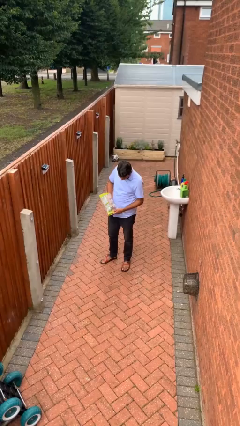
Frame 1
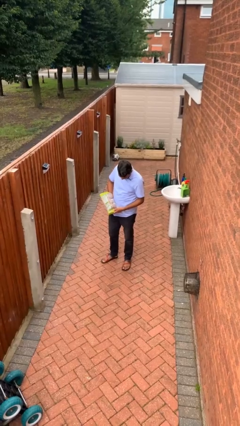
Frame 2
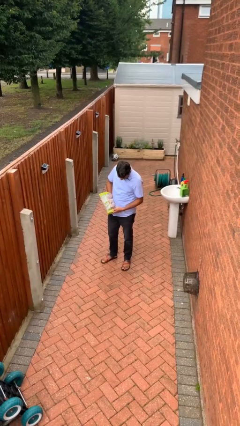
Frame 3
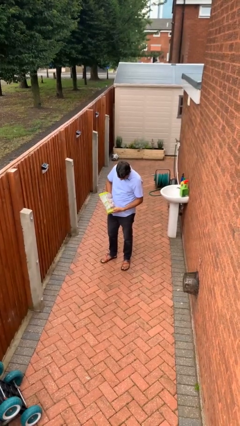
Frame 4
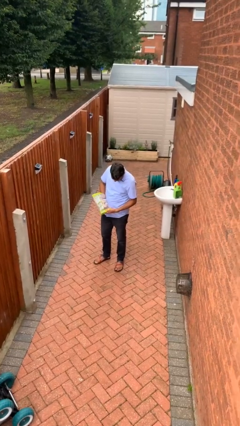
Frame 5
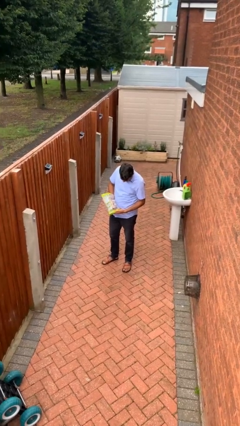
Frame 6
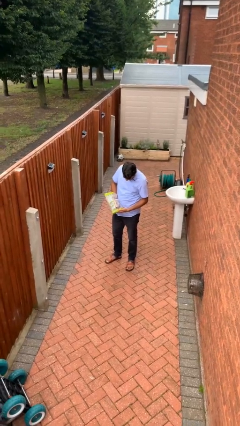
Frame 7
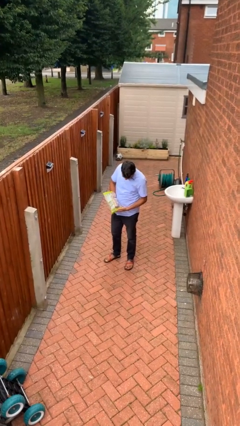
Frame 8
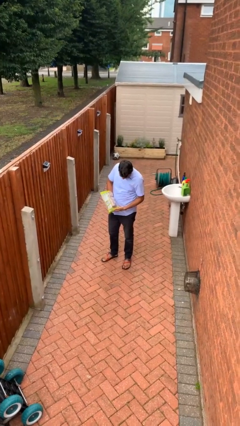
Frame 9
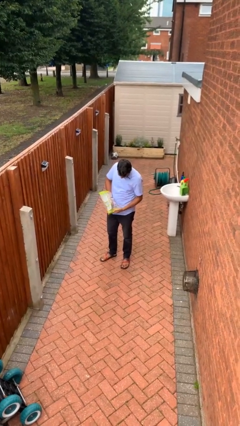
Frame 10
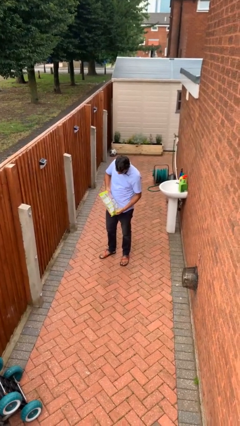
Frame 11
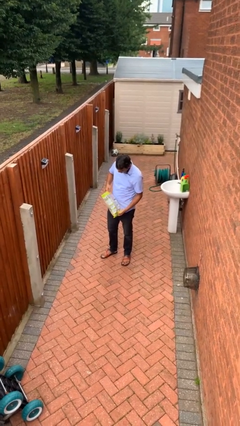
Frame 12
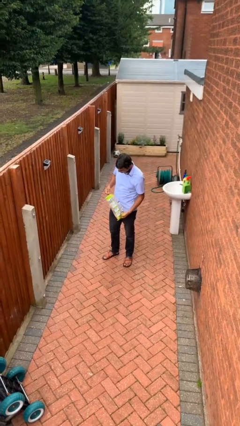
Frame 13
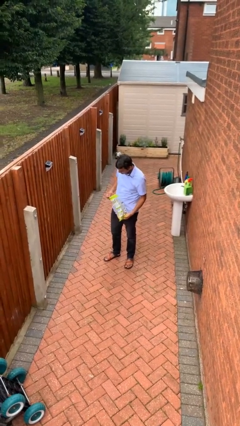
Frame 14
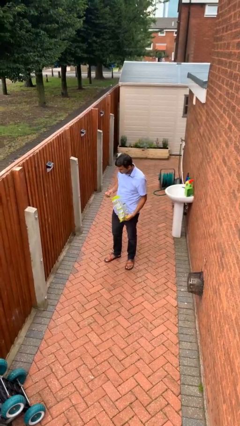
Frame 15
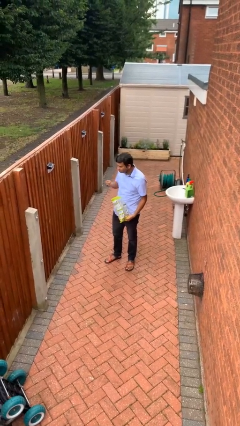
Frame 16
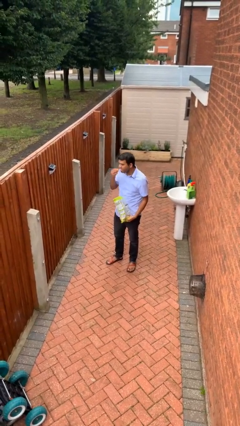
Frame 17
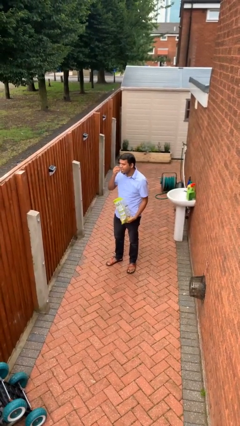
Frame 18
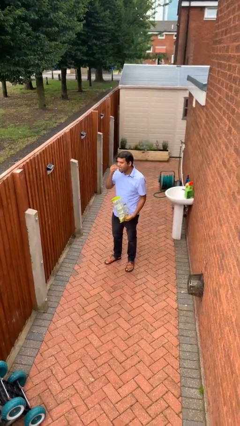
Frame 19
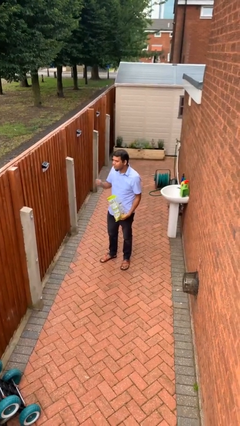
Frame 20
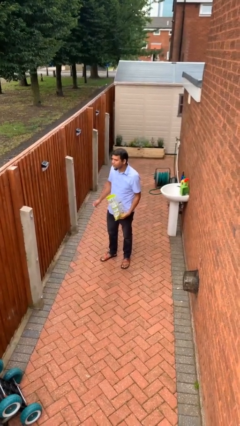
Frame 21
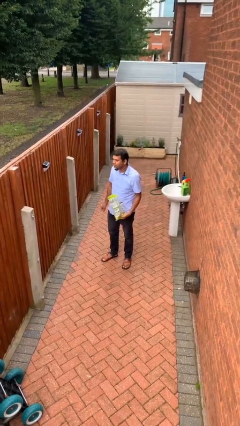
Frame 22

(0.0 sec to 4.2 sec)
person eats snack from bag

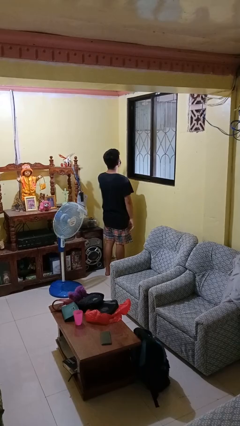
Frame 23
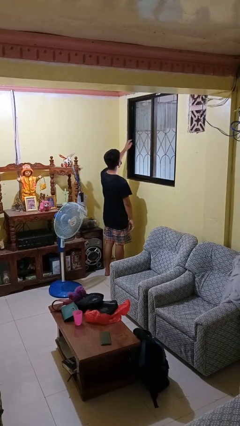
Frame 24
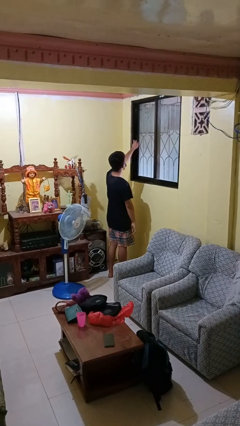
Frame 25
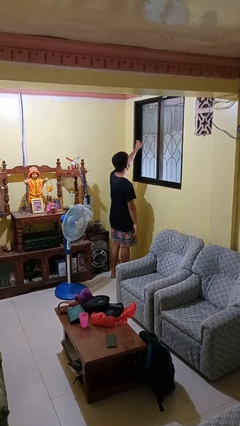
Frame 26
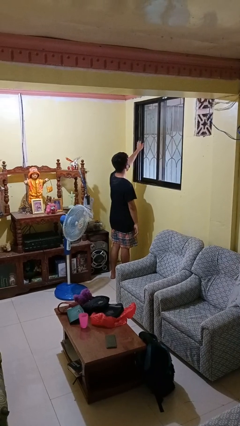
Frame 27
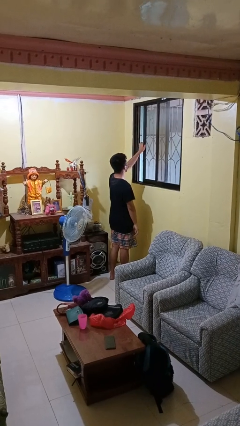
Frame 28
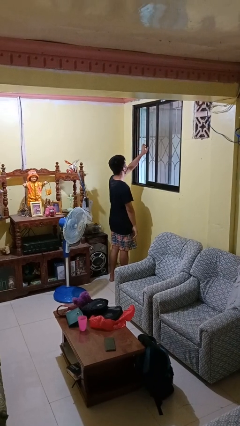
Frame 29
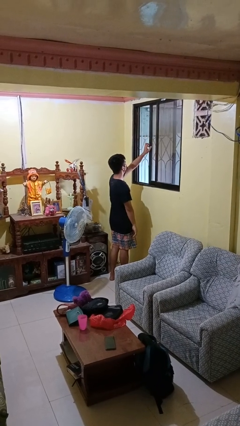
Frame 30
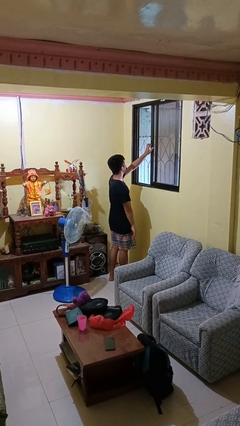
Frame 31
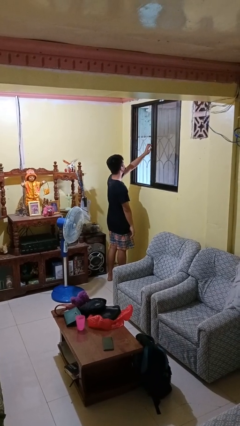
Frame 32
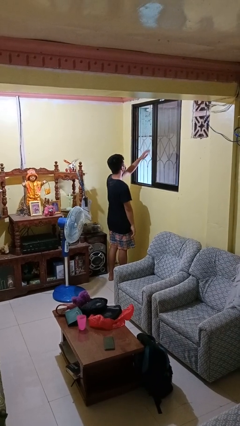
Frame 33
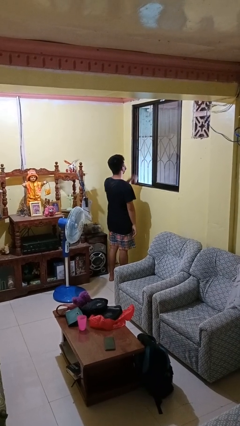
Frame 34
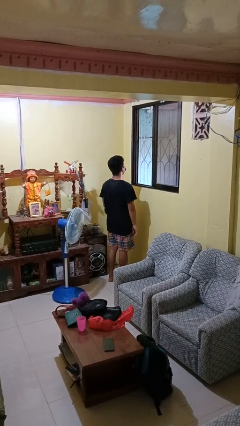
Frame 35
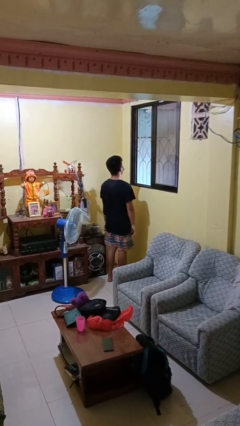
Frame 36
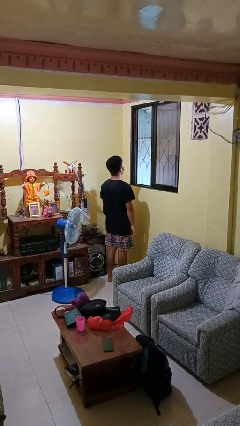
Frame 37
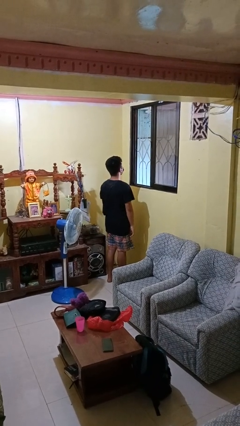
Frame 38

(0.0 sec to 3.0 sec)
person opens home window

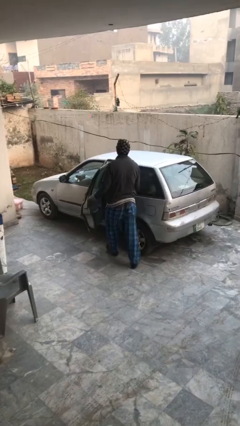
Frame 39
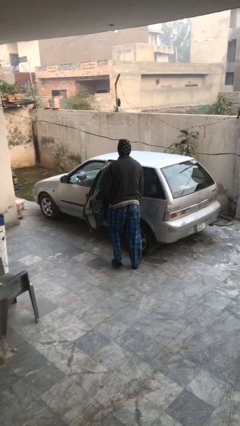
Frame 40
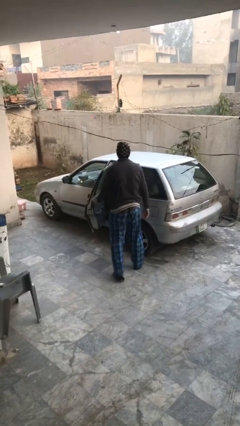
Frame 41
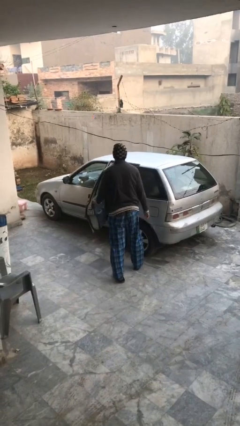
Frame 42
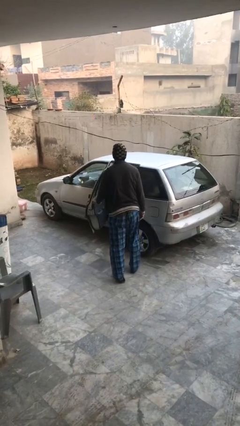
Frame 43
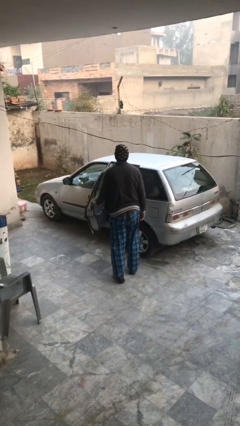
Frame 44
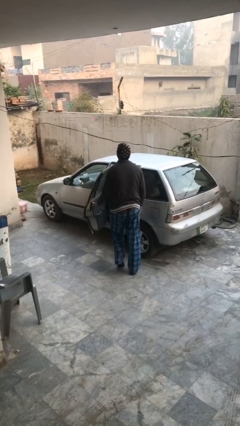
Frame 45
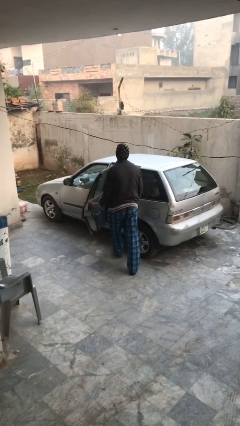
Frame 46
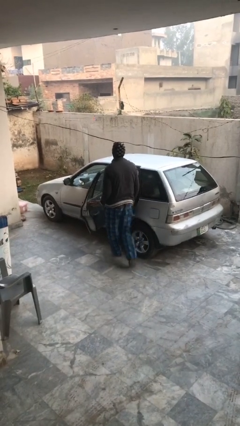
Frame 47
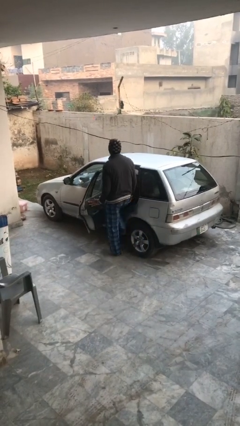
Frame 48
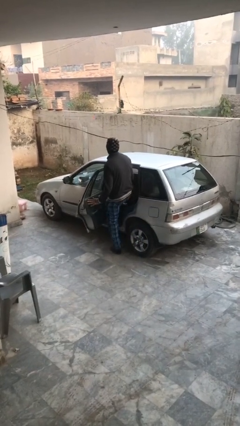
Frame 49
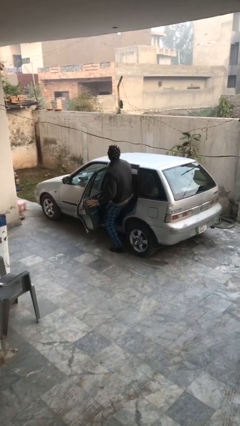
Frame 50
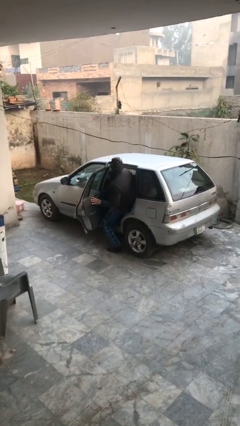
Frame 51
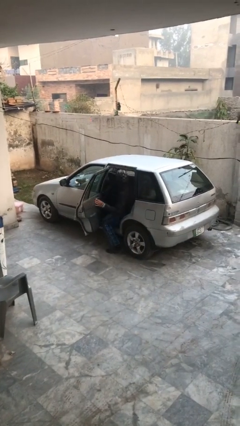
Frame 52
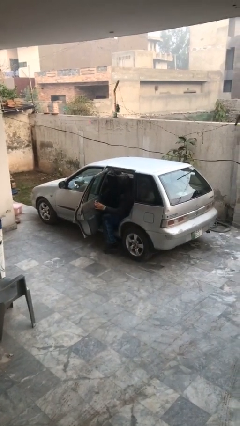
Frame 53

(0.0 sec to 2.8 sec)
person enters car

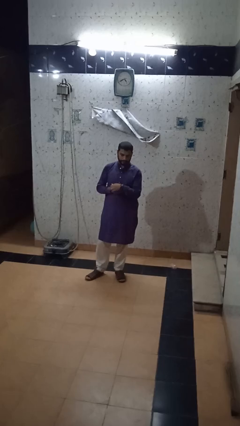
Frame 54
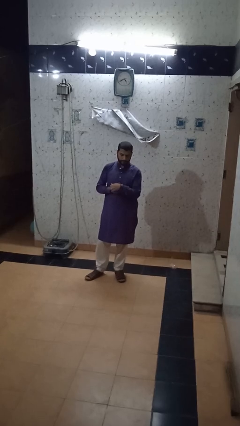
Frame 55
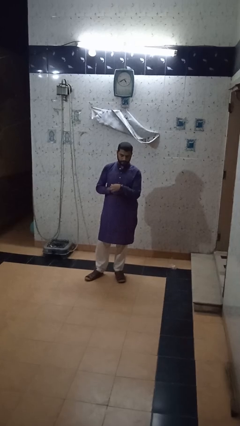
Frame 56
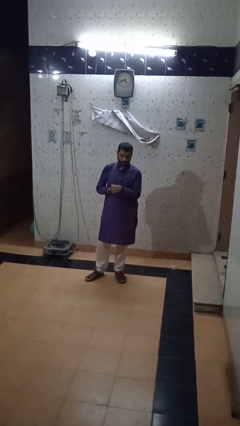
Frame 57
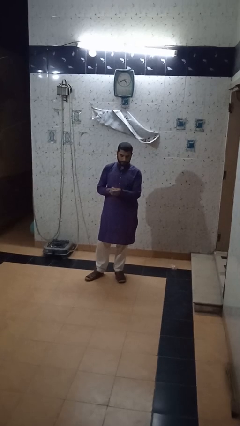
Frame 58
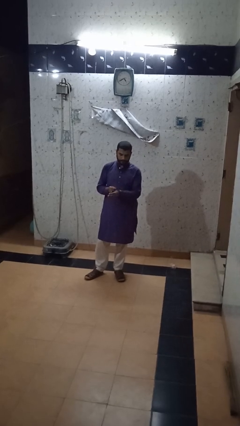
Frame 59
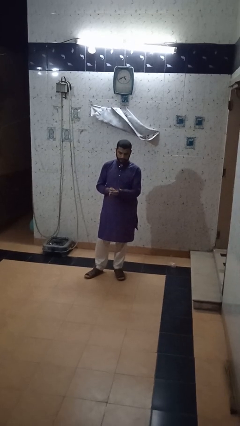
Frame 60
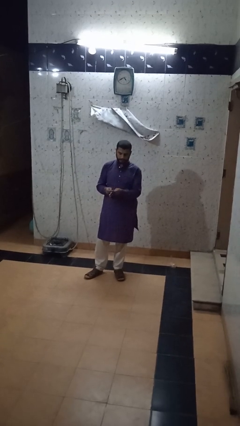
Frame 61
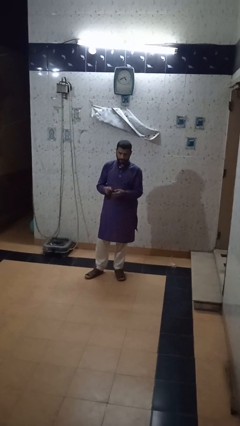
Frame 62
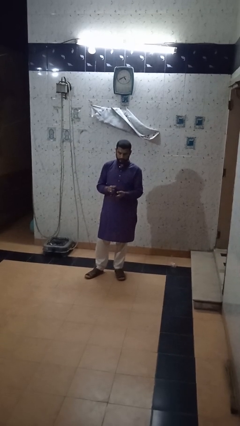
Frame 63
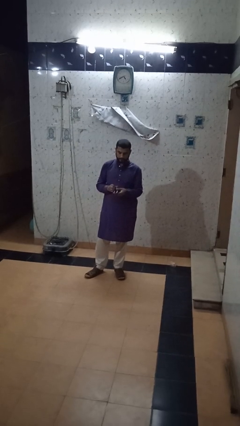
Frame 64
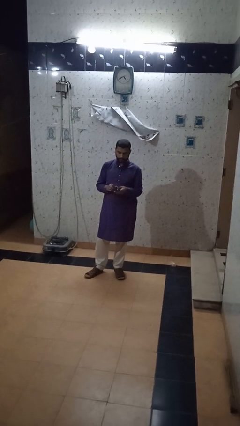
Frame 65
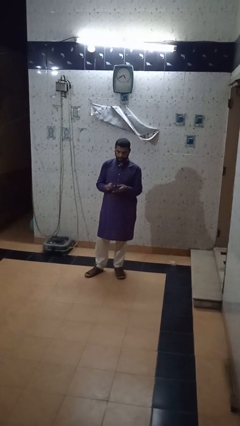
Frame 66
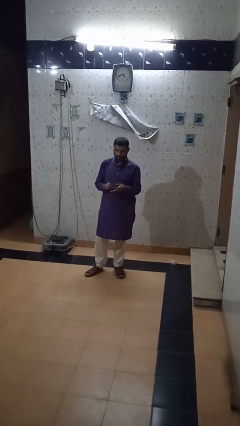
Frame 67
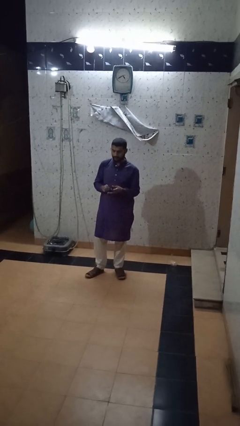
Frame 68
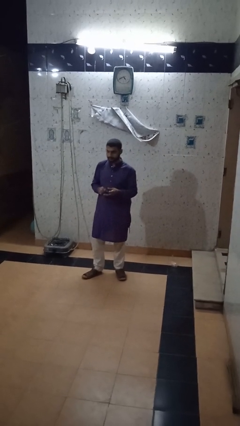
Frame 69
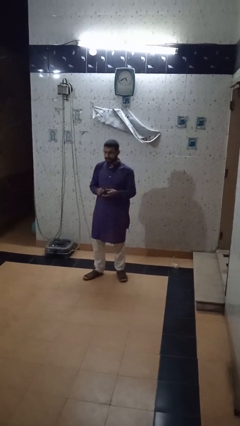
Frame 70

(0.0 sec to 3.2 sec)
person takes off wristwatch

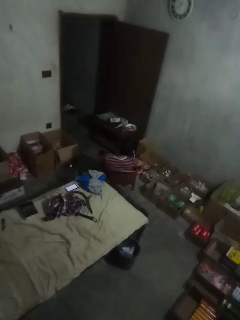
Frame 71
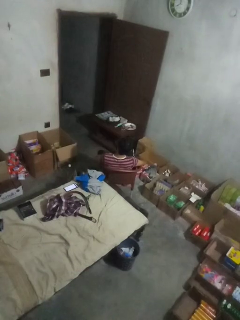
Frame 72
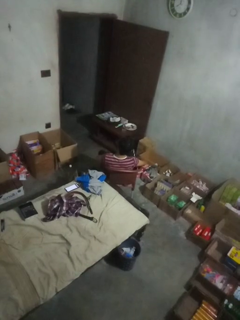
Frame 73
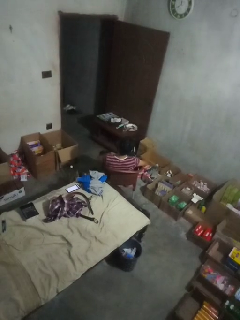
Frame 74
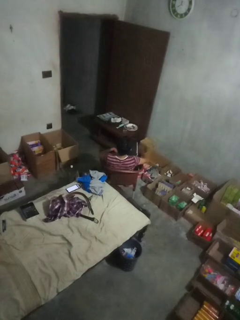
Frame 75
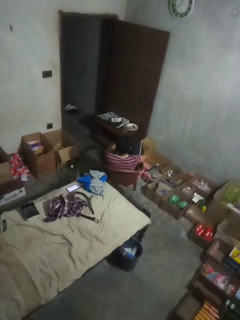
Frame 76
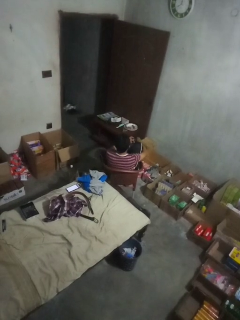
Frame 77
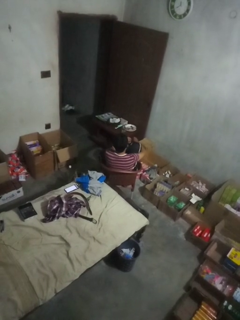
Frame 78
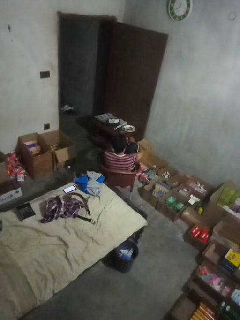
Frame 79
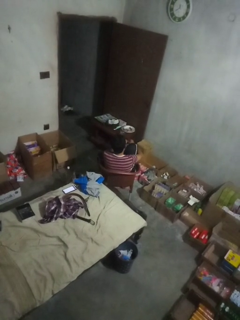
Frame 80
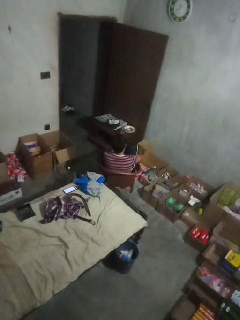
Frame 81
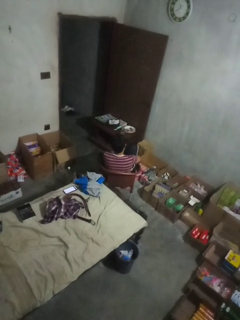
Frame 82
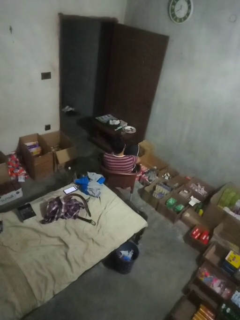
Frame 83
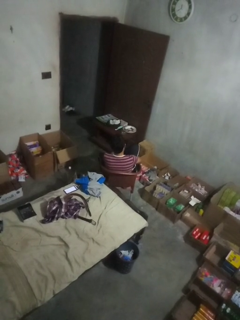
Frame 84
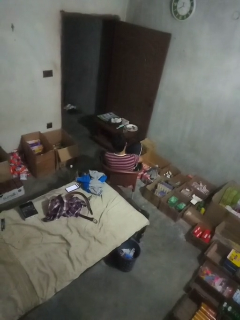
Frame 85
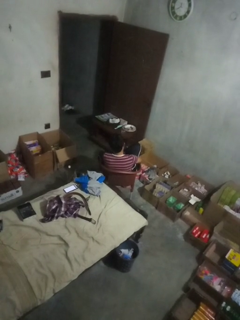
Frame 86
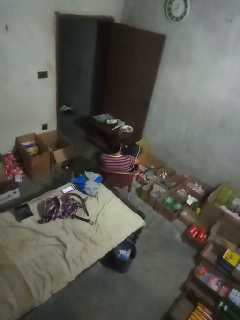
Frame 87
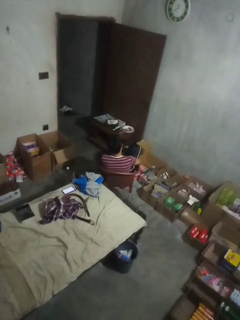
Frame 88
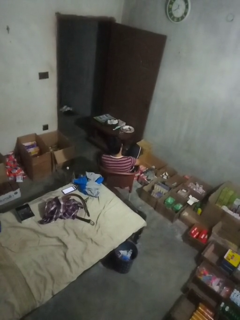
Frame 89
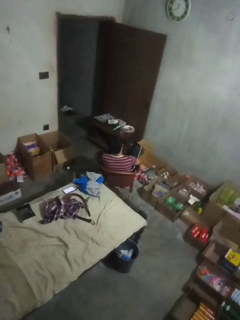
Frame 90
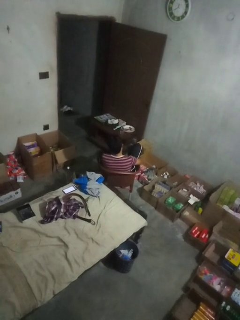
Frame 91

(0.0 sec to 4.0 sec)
person puts on socks

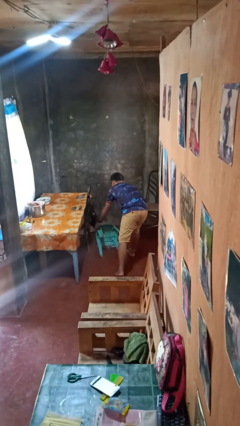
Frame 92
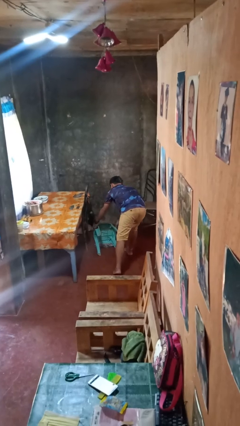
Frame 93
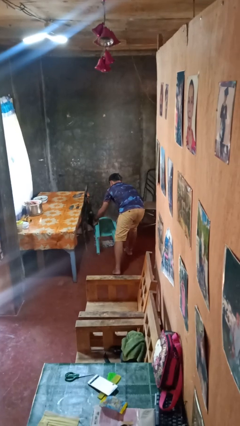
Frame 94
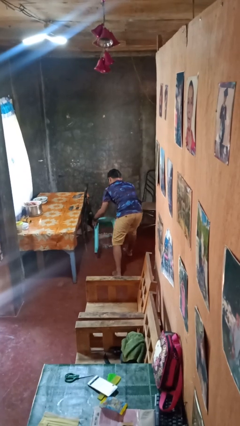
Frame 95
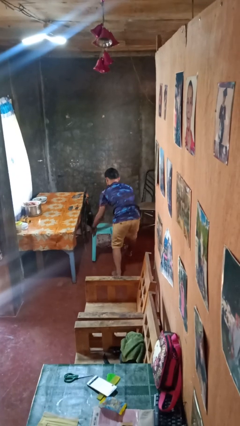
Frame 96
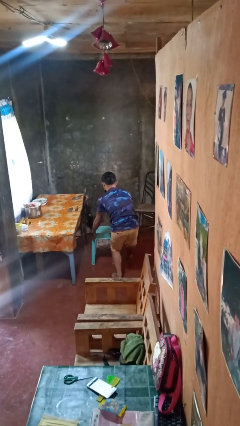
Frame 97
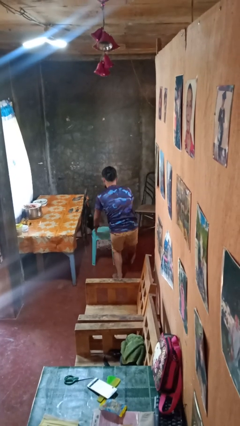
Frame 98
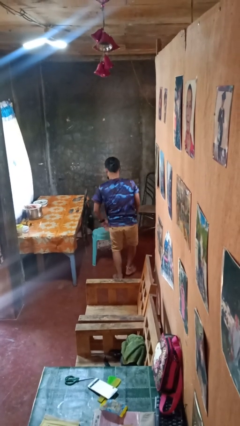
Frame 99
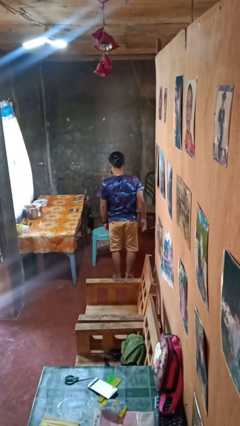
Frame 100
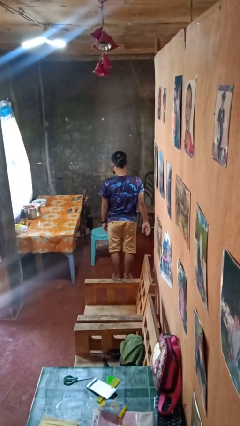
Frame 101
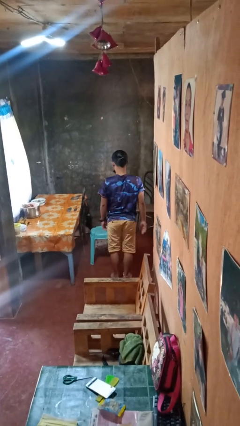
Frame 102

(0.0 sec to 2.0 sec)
person sets upright furniture
